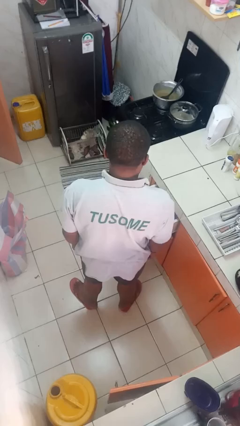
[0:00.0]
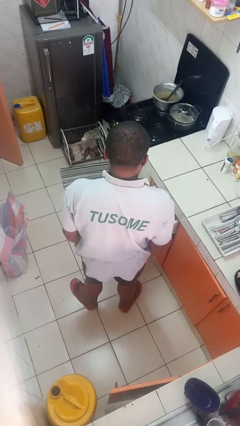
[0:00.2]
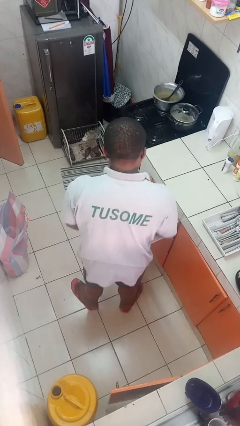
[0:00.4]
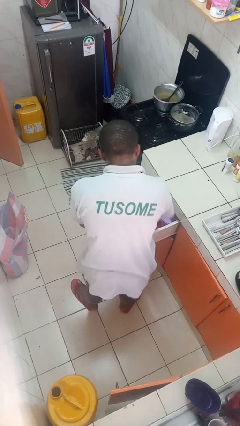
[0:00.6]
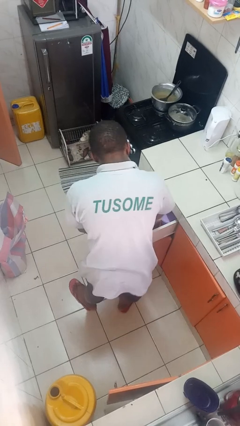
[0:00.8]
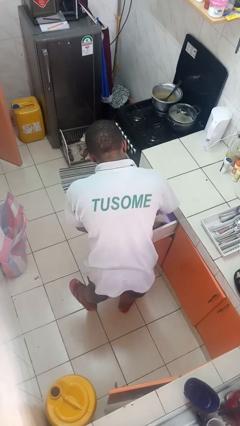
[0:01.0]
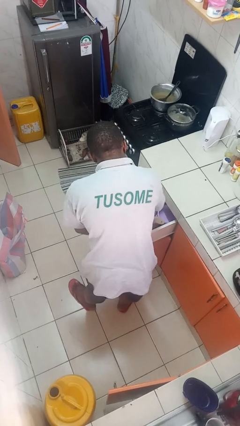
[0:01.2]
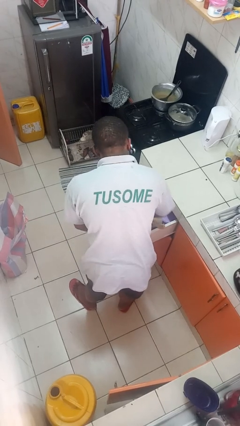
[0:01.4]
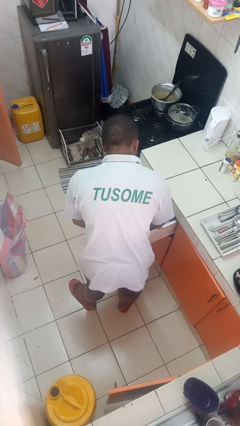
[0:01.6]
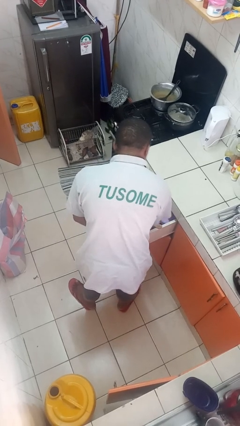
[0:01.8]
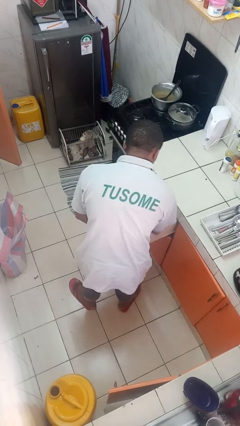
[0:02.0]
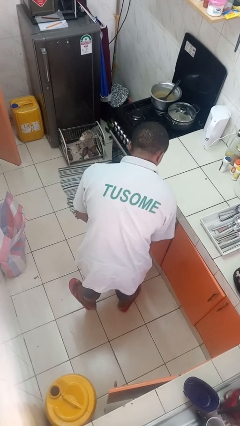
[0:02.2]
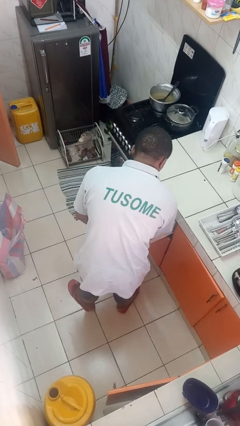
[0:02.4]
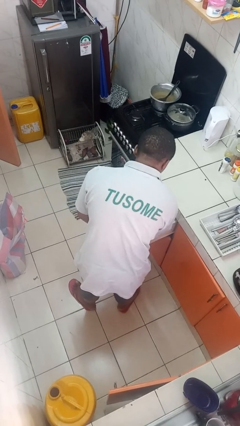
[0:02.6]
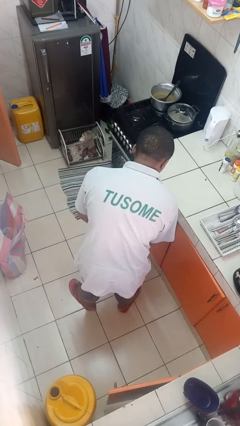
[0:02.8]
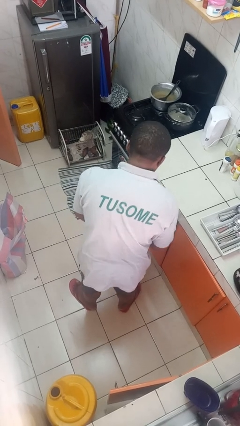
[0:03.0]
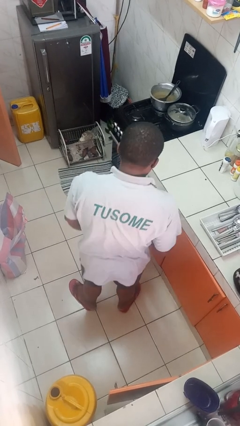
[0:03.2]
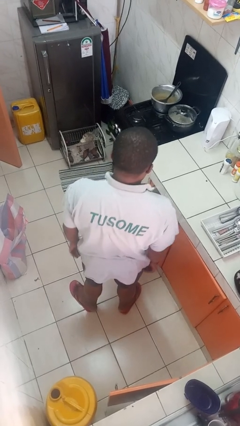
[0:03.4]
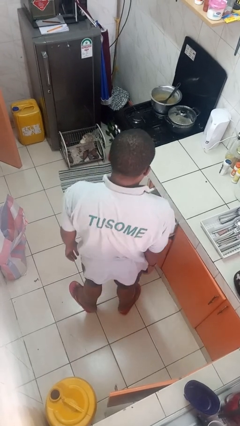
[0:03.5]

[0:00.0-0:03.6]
person searches in kitchen drawer

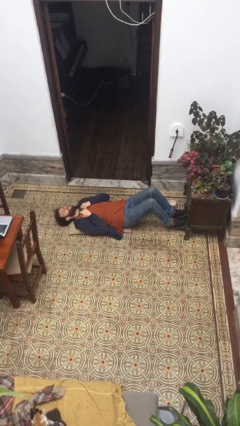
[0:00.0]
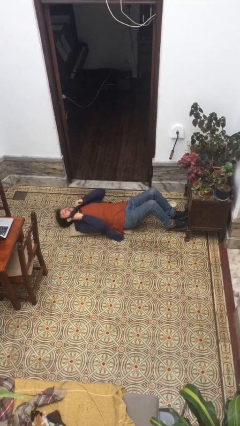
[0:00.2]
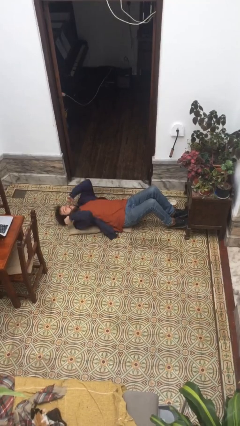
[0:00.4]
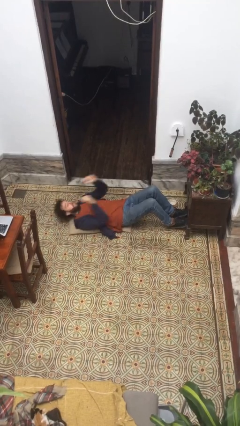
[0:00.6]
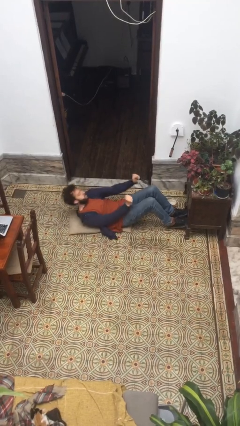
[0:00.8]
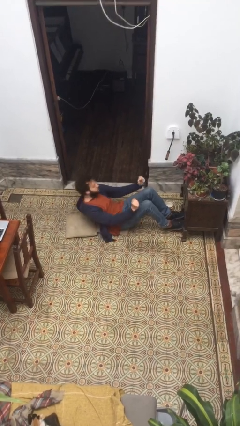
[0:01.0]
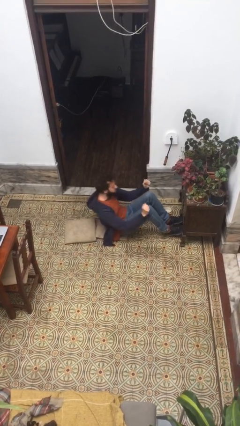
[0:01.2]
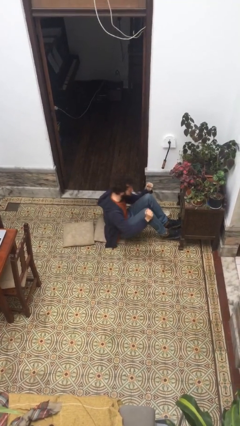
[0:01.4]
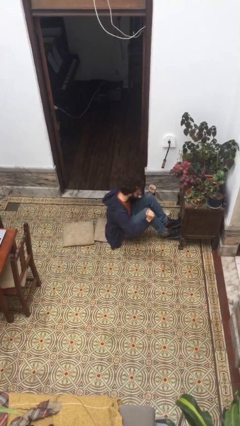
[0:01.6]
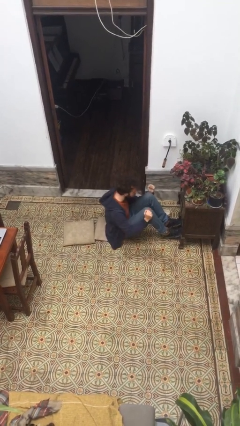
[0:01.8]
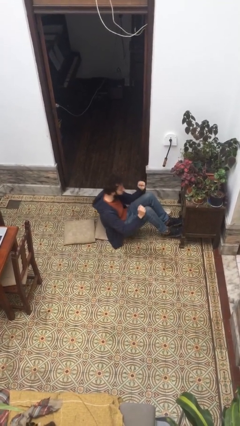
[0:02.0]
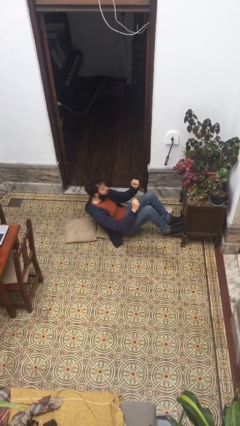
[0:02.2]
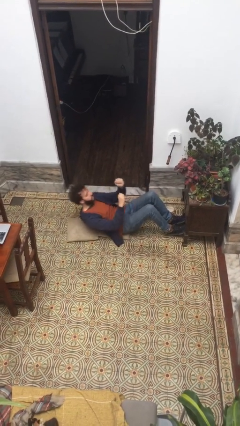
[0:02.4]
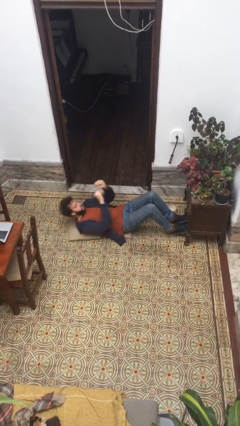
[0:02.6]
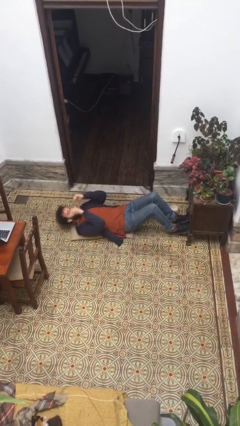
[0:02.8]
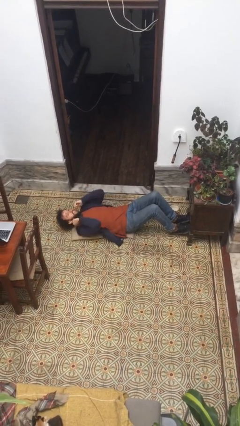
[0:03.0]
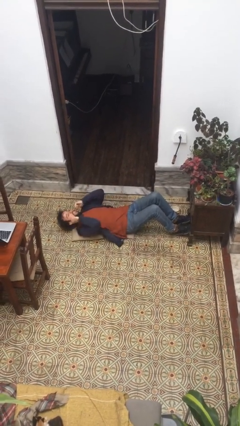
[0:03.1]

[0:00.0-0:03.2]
person exercises with situp

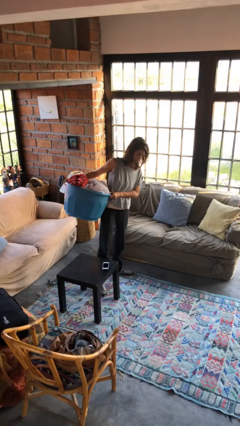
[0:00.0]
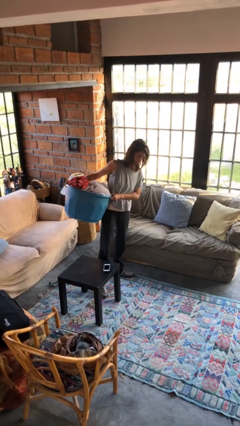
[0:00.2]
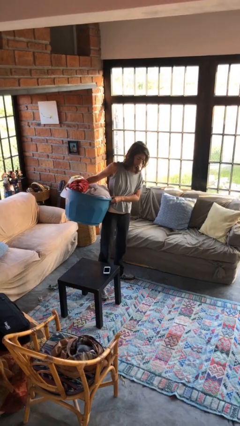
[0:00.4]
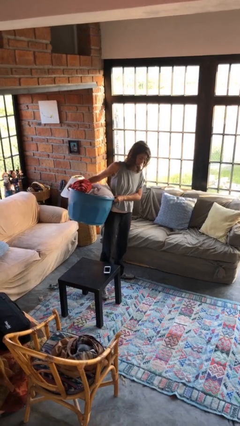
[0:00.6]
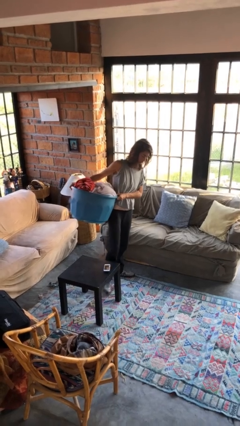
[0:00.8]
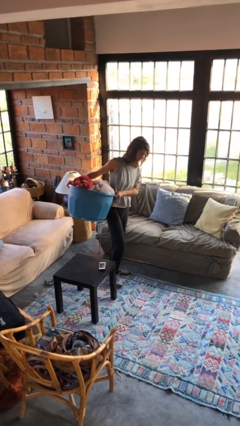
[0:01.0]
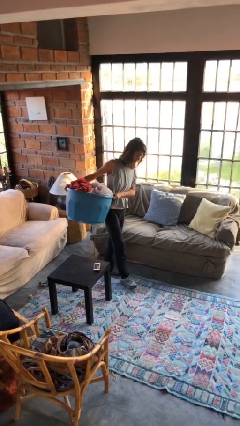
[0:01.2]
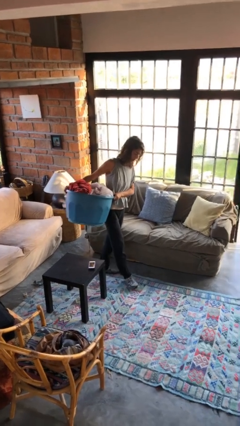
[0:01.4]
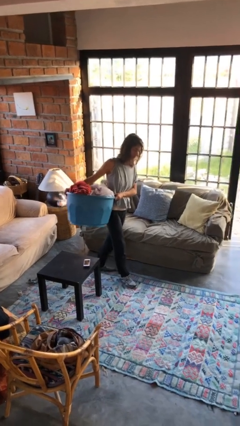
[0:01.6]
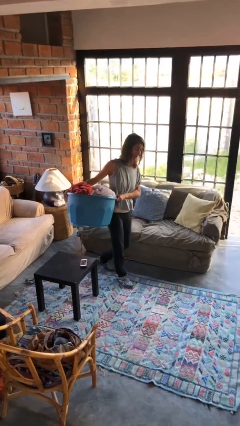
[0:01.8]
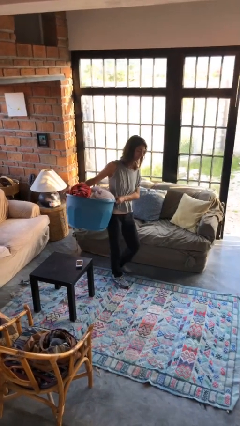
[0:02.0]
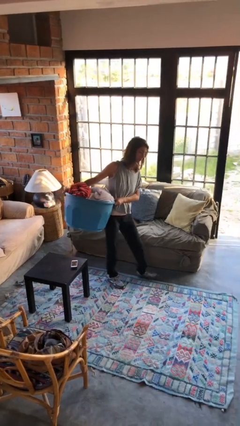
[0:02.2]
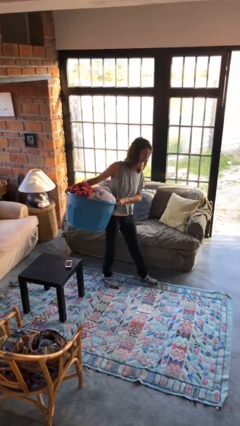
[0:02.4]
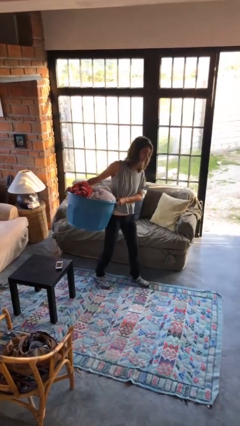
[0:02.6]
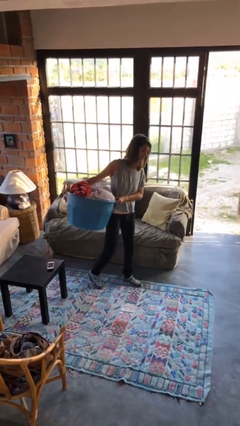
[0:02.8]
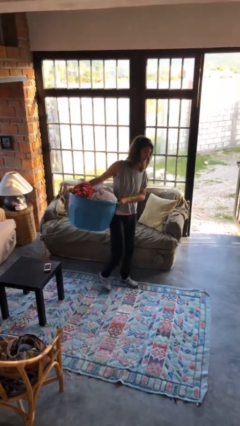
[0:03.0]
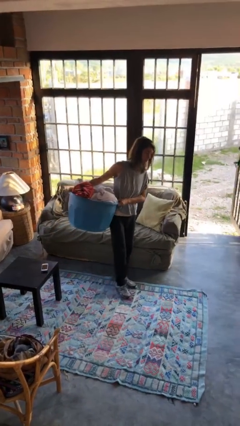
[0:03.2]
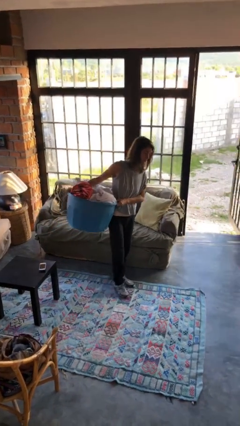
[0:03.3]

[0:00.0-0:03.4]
person carries laundry basket

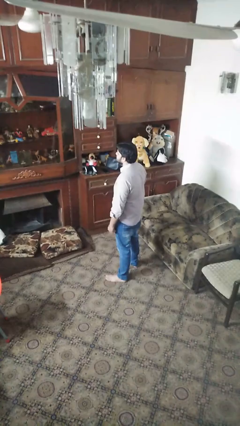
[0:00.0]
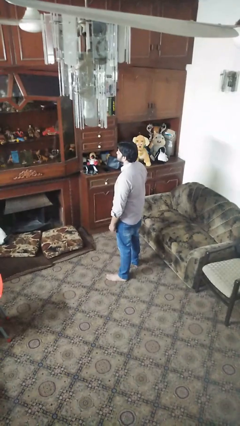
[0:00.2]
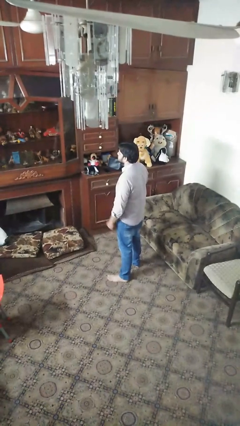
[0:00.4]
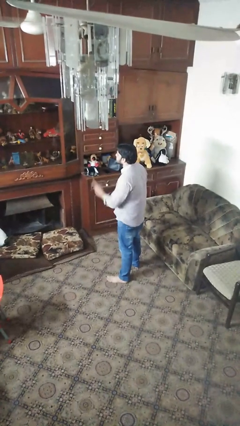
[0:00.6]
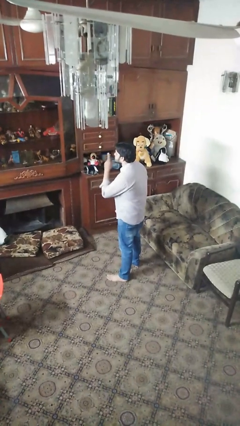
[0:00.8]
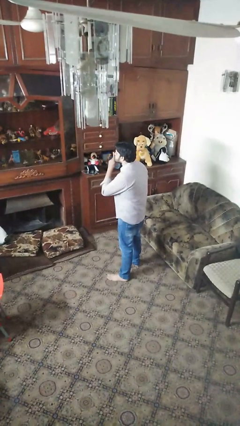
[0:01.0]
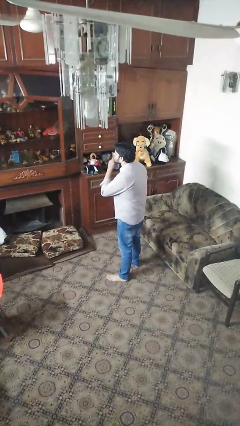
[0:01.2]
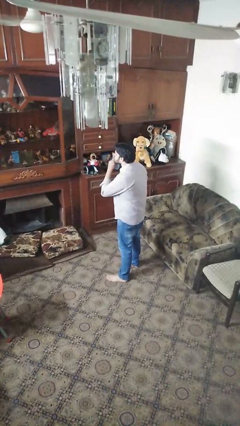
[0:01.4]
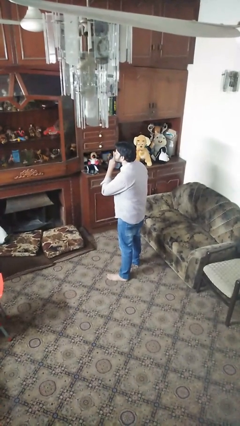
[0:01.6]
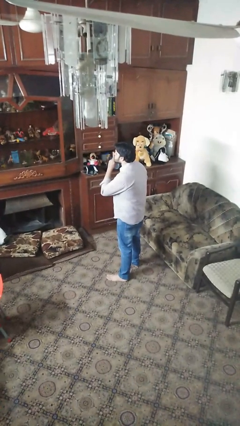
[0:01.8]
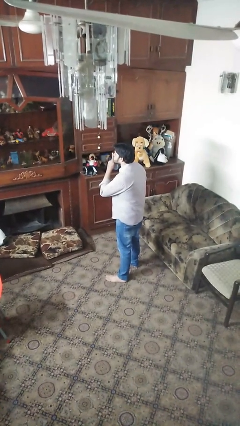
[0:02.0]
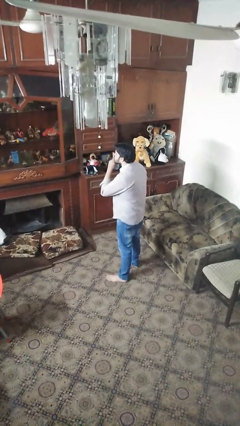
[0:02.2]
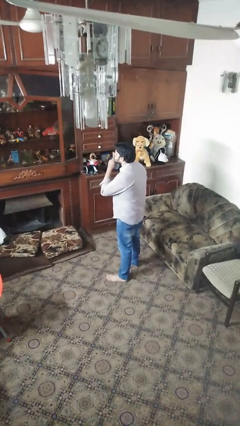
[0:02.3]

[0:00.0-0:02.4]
person gestures be quiet

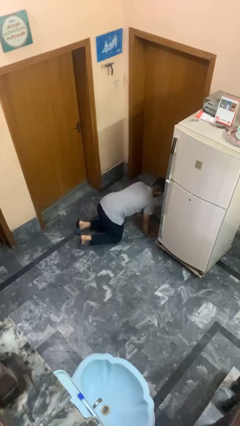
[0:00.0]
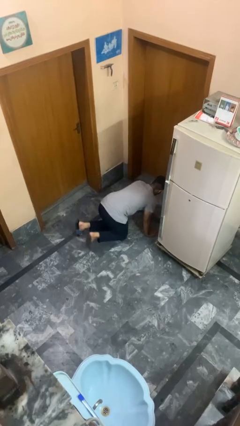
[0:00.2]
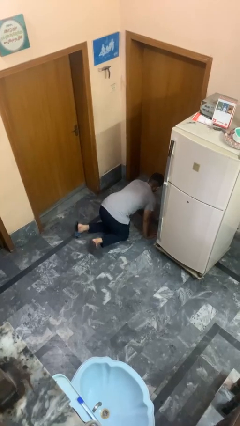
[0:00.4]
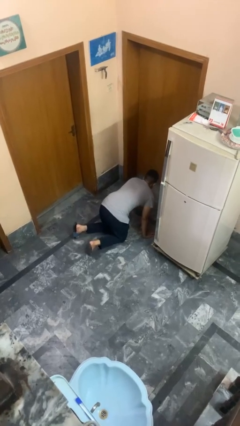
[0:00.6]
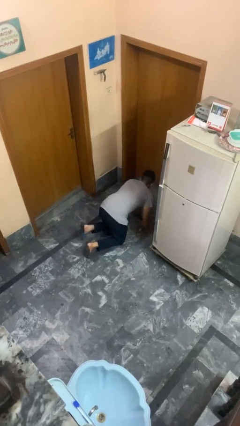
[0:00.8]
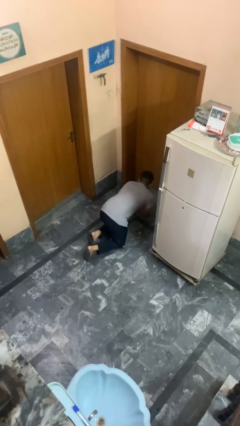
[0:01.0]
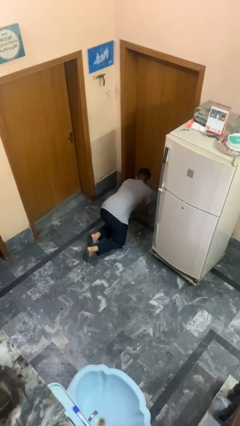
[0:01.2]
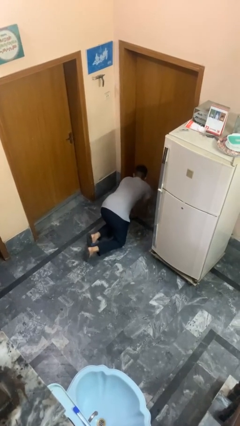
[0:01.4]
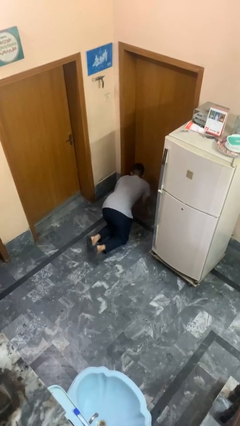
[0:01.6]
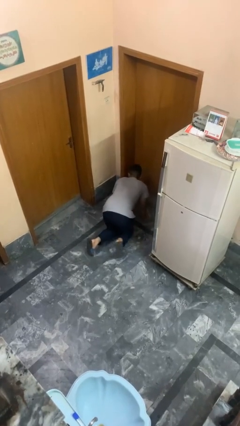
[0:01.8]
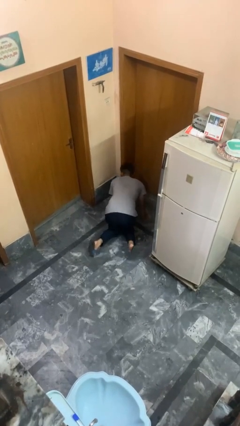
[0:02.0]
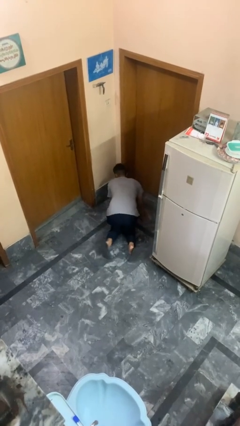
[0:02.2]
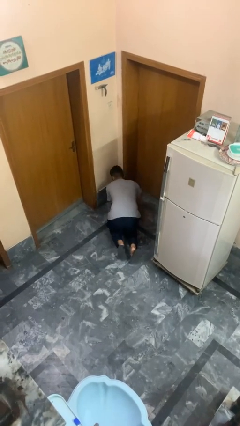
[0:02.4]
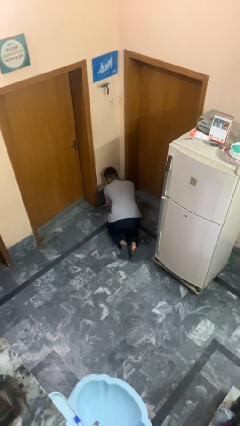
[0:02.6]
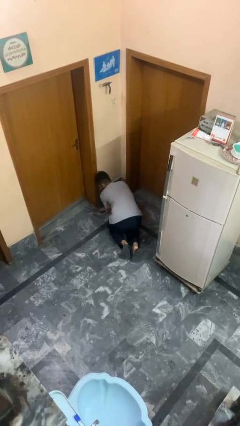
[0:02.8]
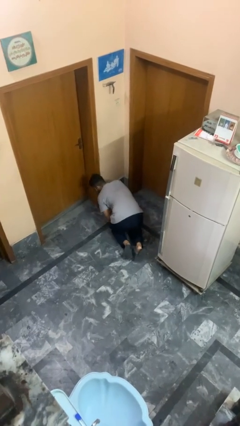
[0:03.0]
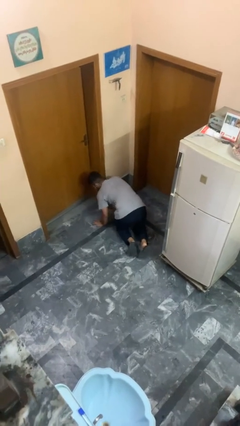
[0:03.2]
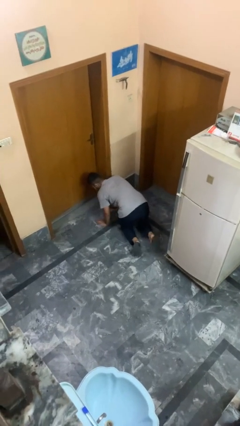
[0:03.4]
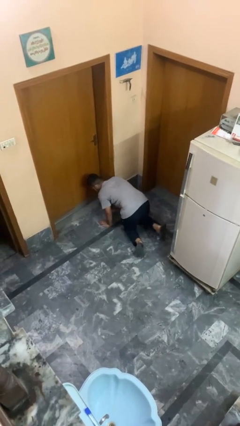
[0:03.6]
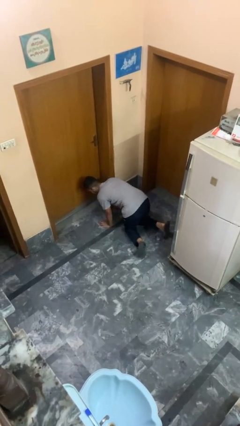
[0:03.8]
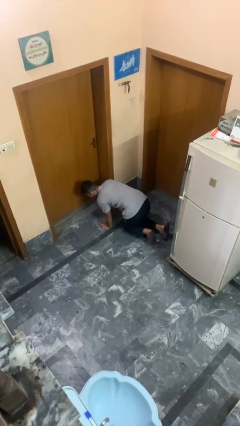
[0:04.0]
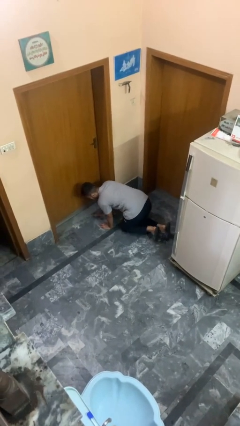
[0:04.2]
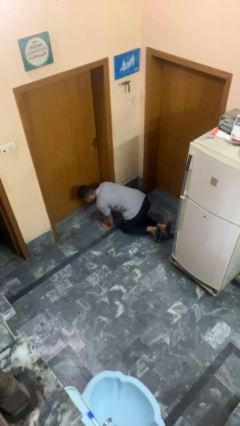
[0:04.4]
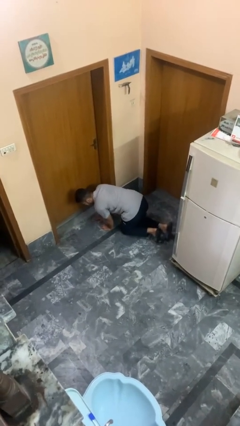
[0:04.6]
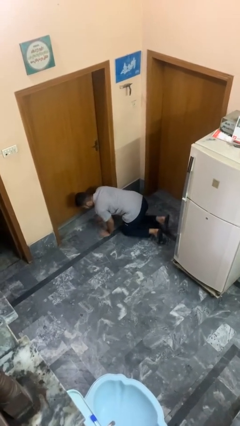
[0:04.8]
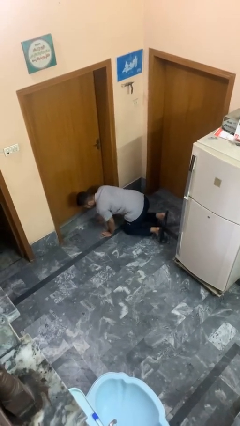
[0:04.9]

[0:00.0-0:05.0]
person crawls

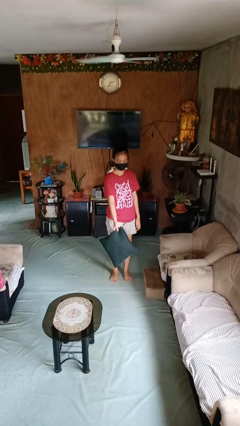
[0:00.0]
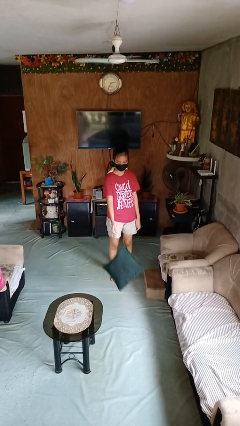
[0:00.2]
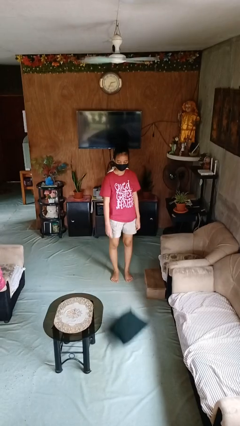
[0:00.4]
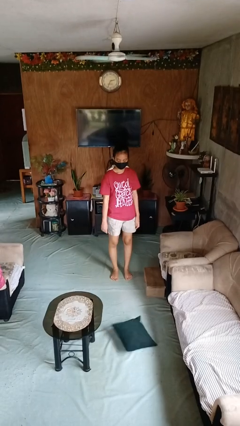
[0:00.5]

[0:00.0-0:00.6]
person throws object to ground
